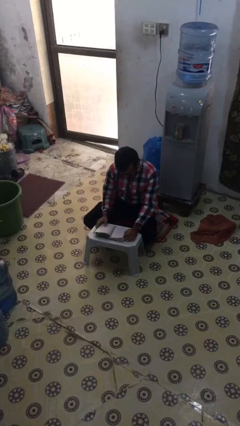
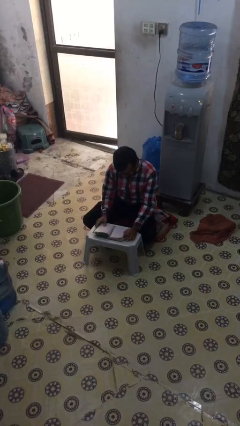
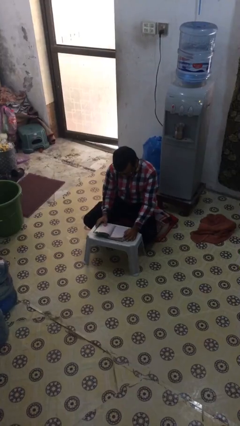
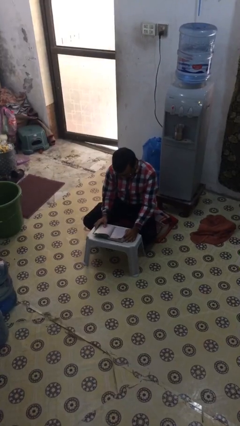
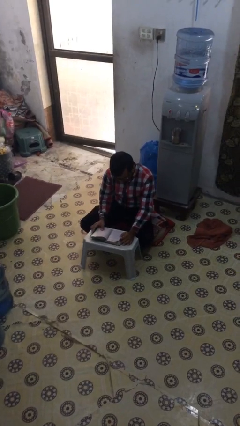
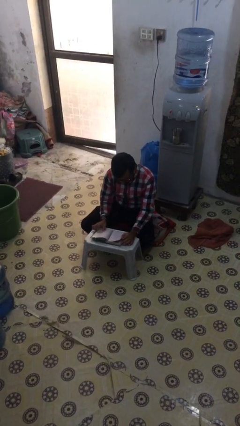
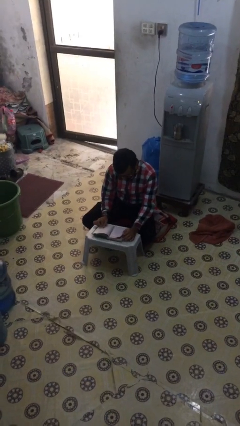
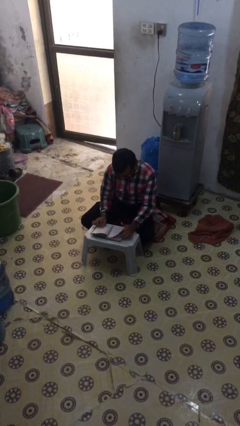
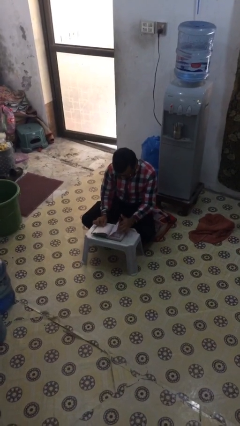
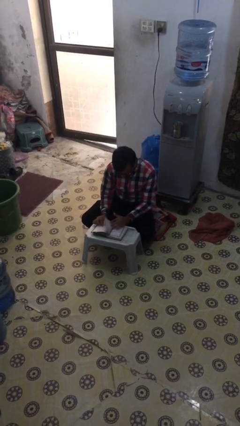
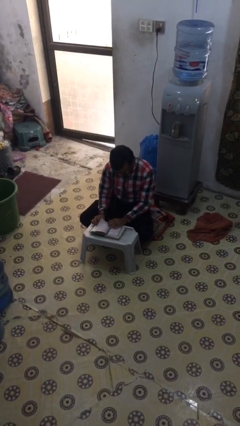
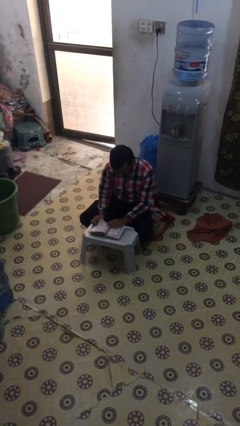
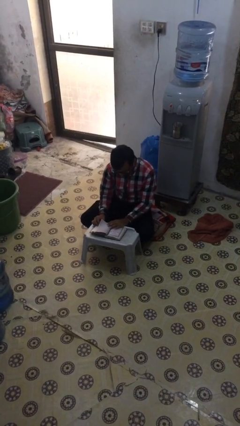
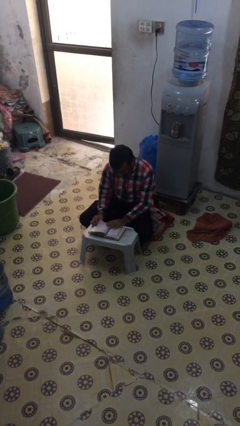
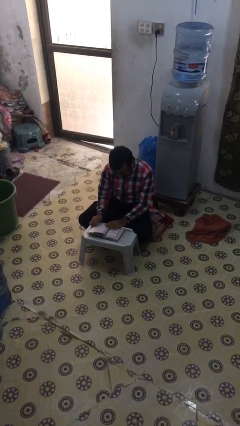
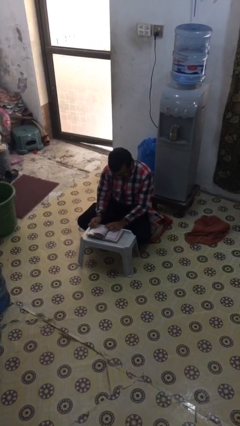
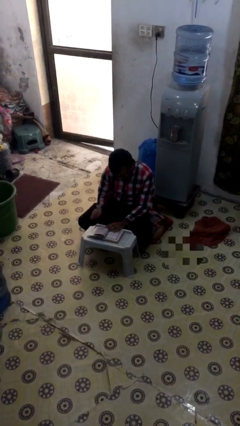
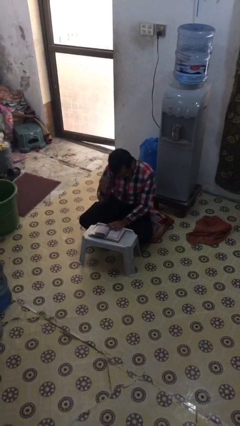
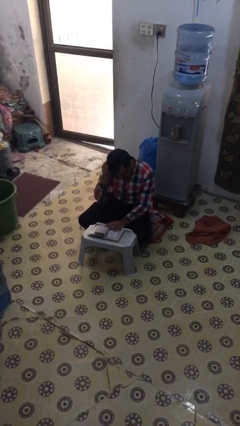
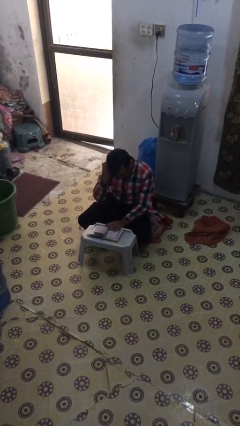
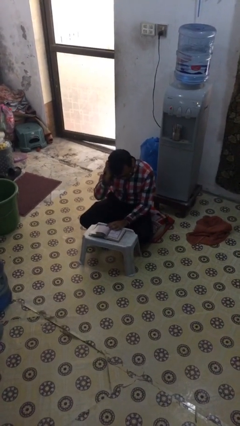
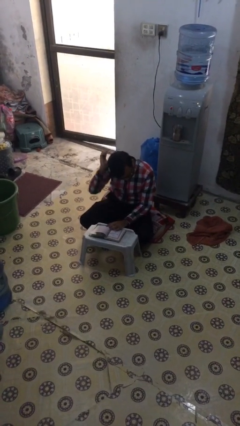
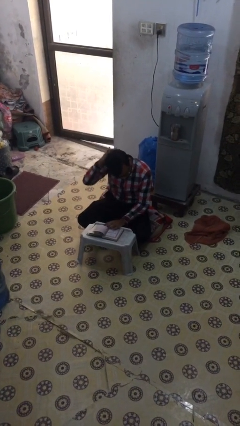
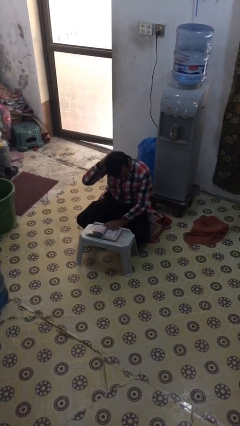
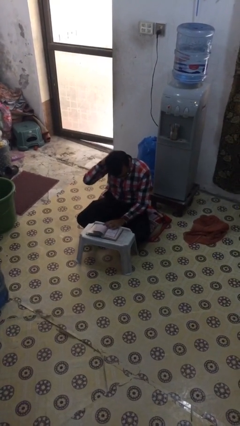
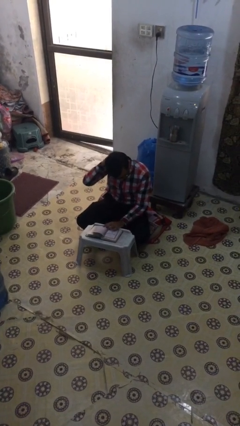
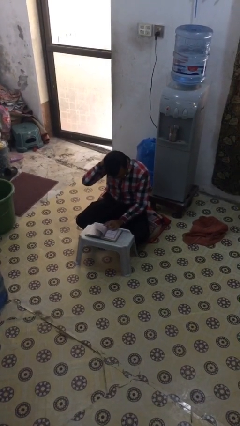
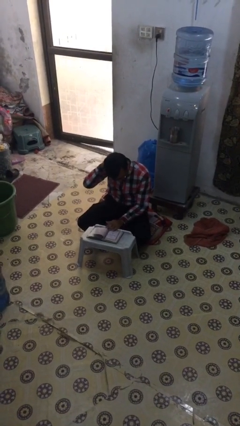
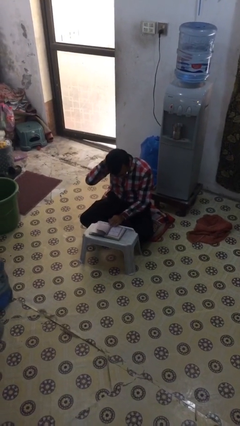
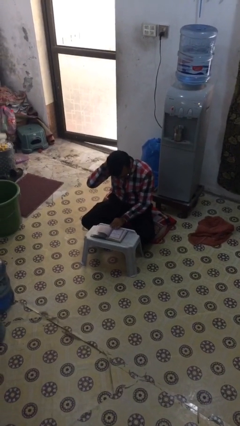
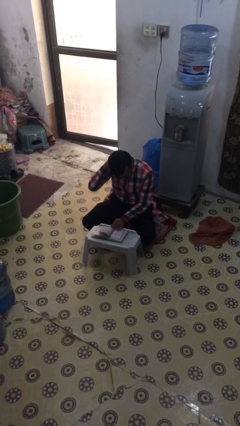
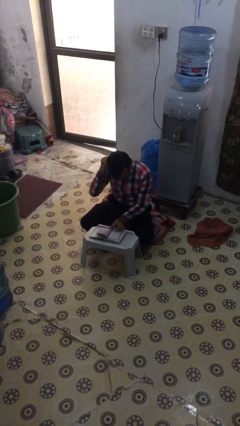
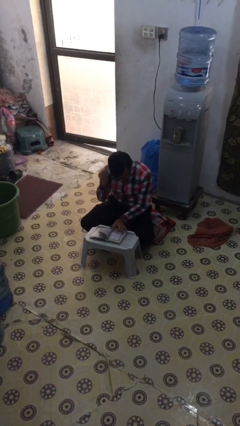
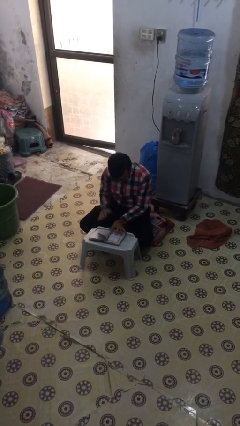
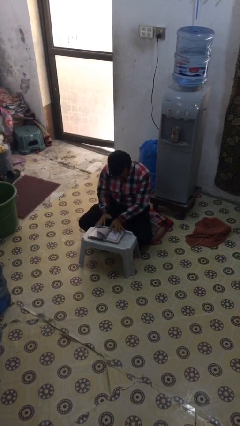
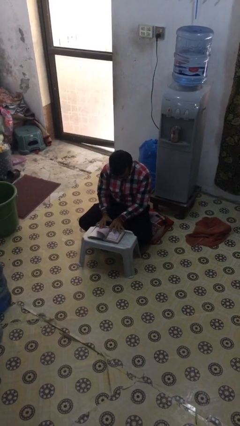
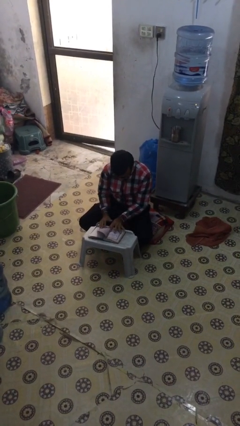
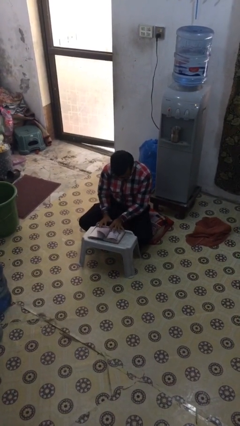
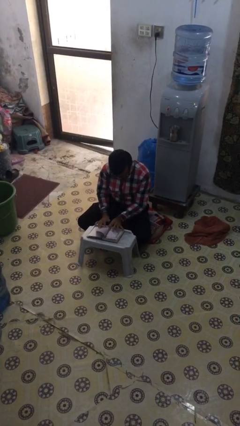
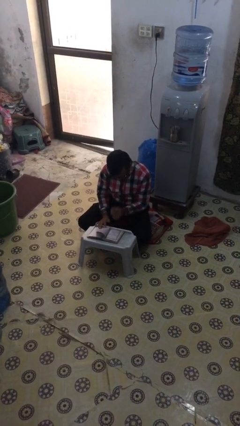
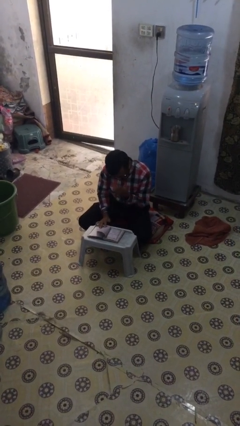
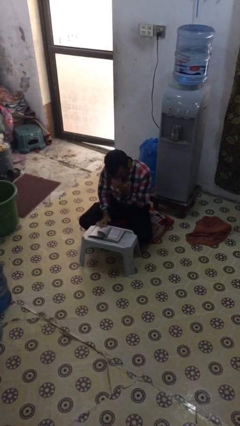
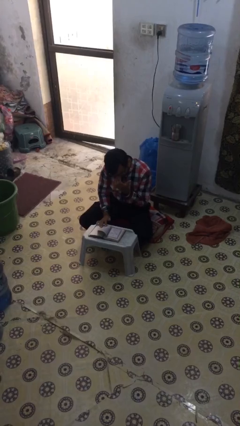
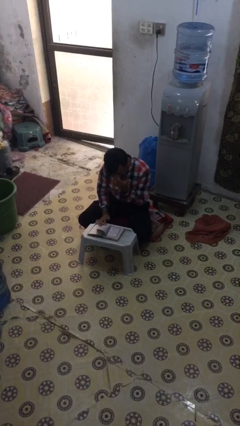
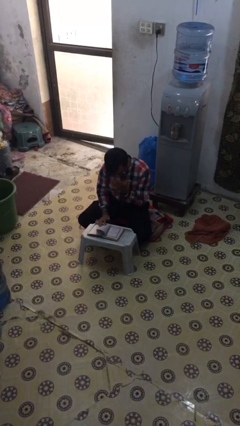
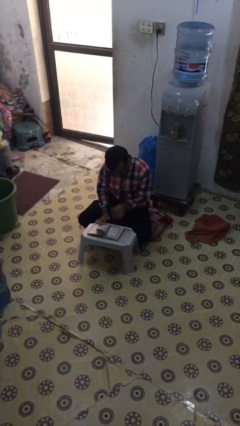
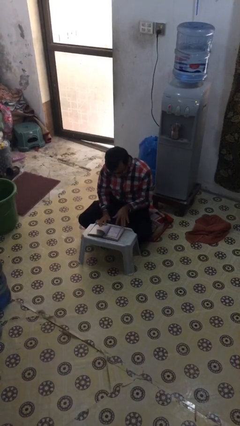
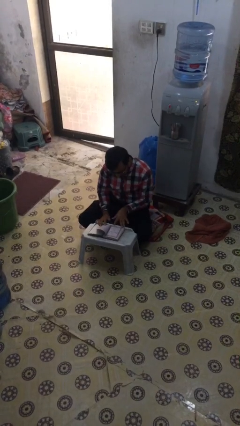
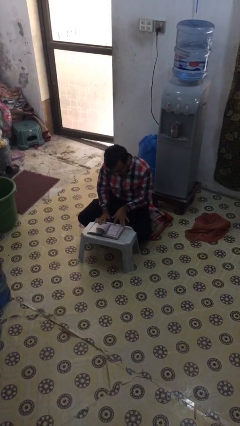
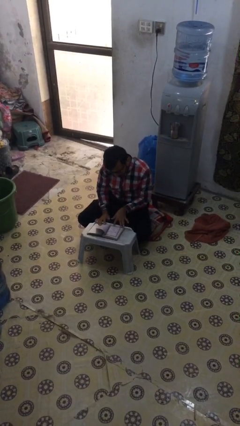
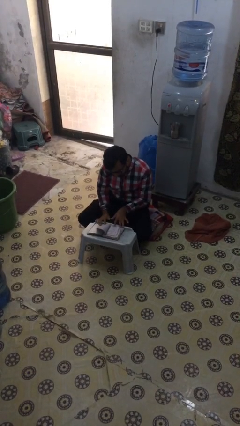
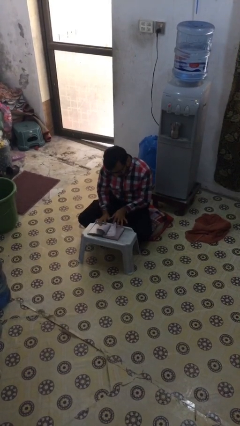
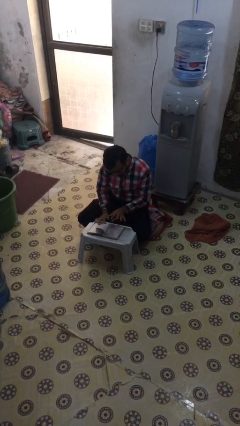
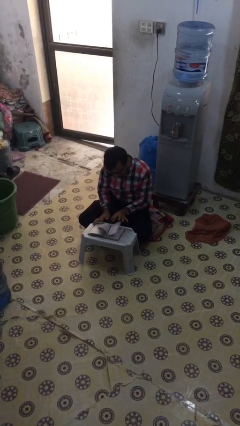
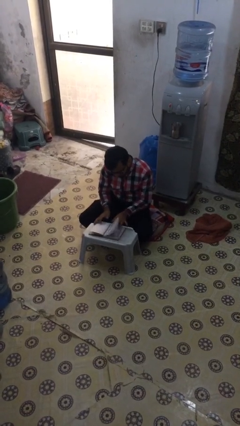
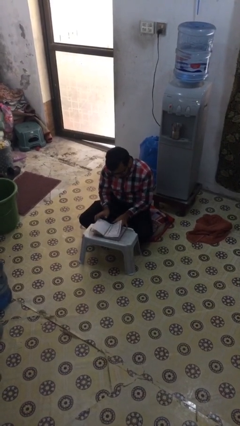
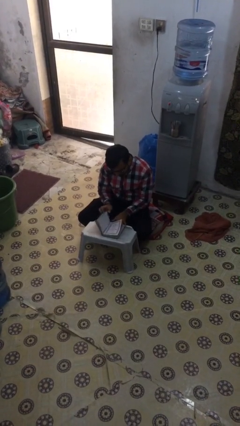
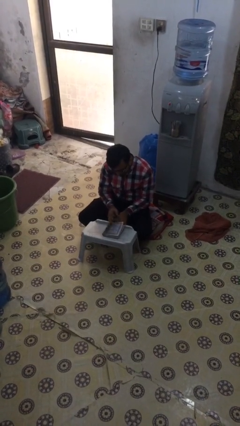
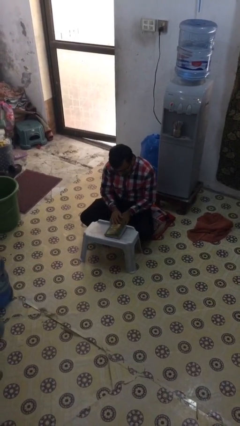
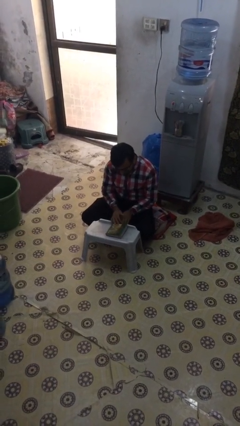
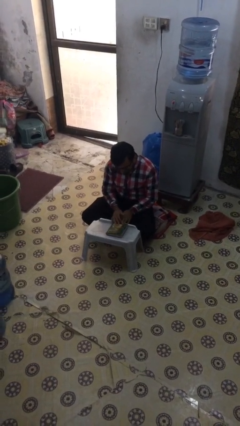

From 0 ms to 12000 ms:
person reads document

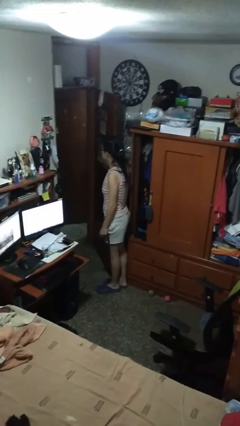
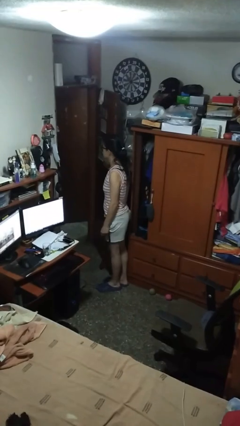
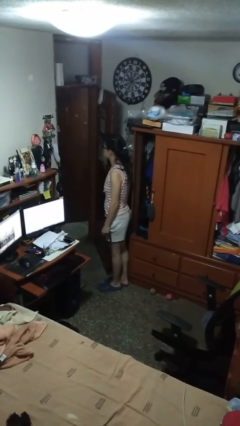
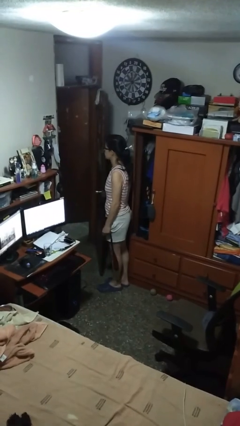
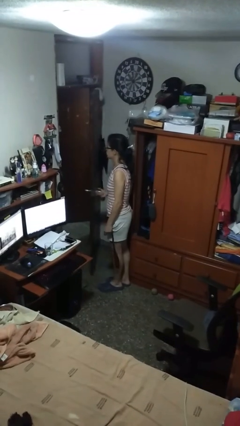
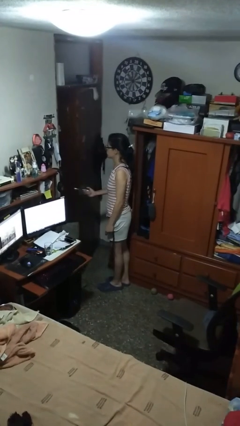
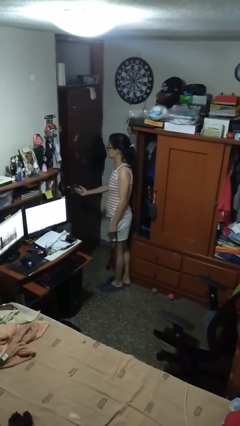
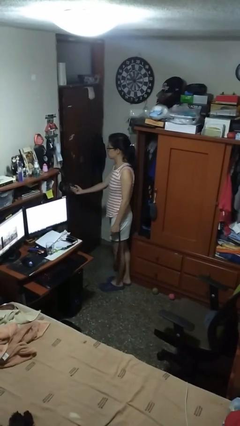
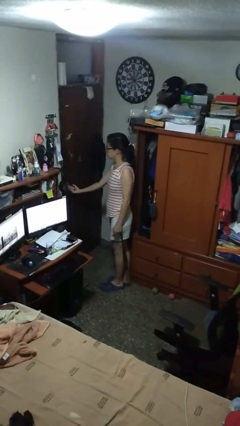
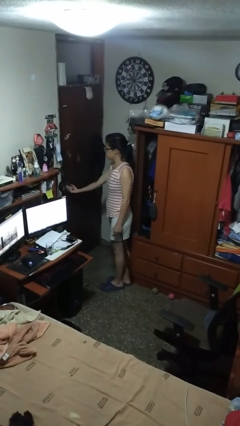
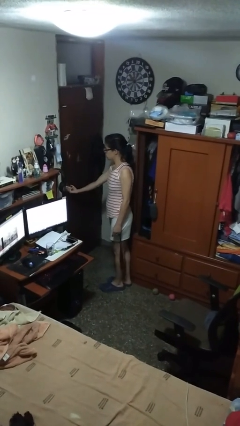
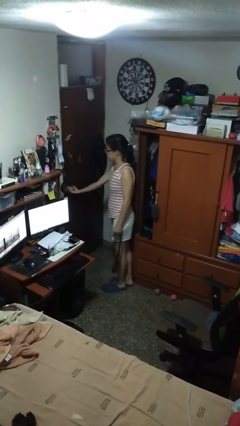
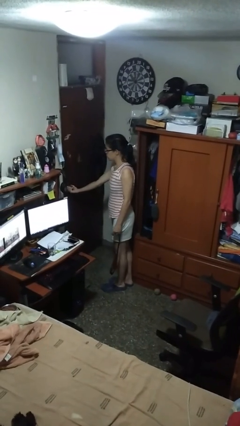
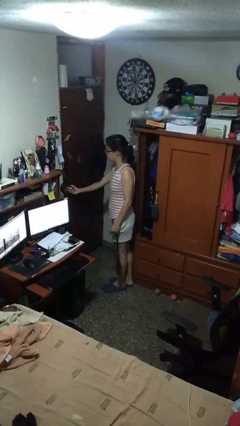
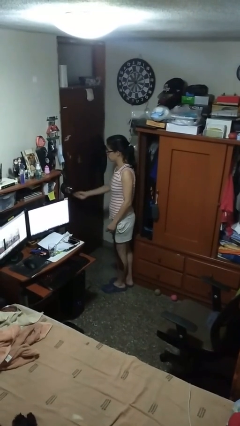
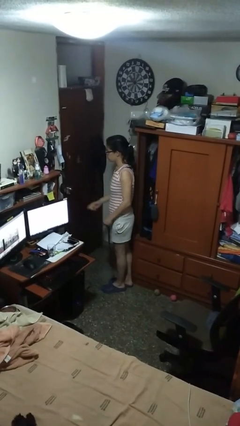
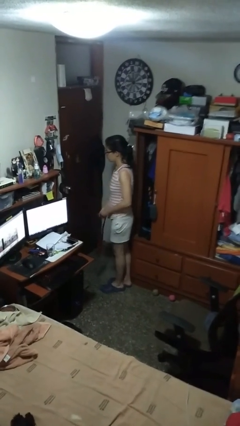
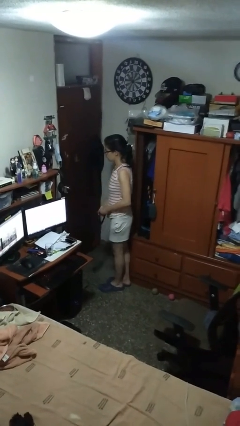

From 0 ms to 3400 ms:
person closes facility door

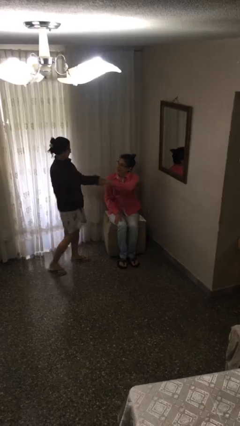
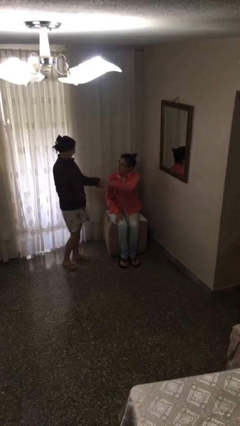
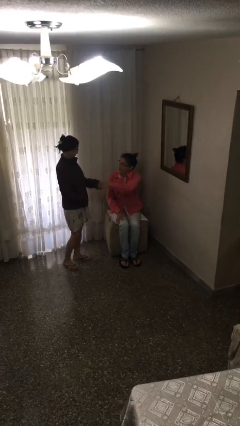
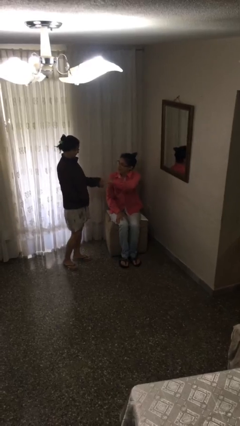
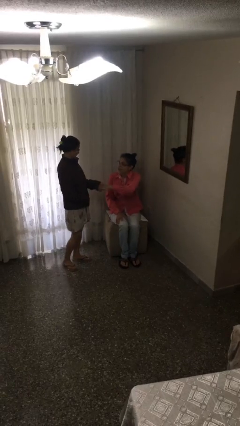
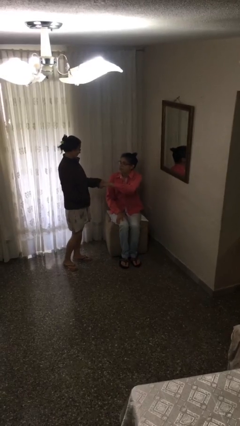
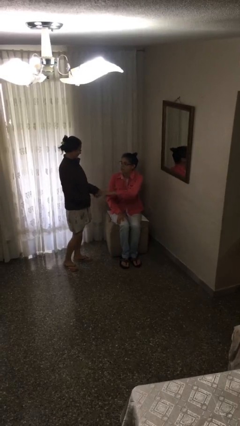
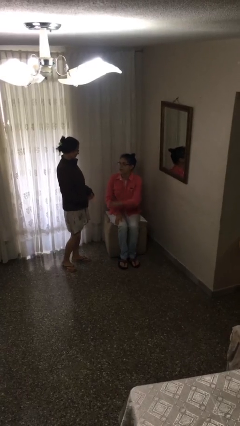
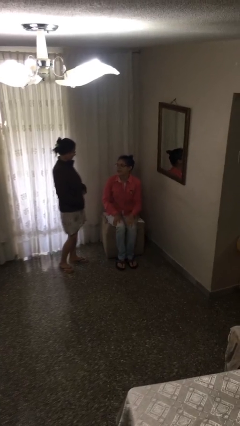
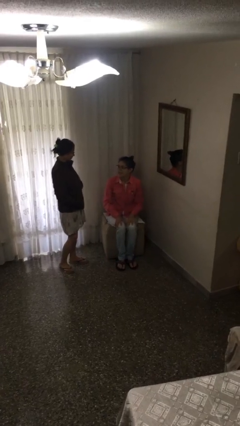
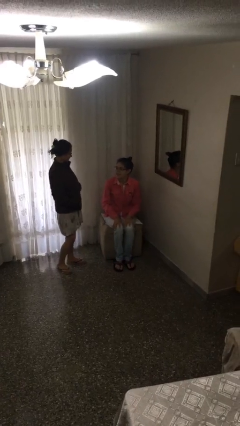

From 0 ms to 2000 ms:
person shakes hand

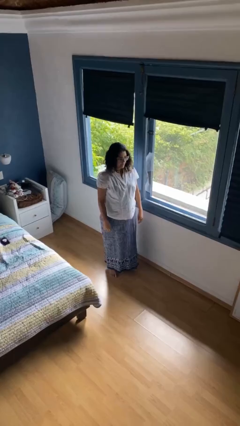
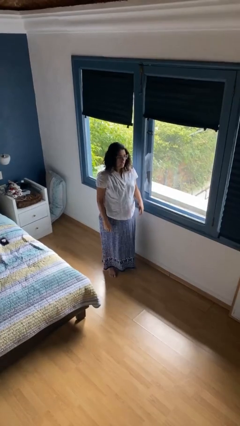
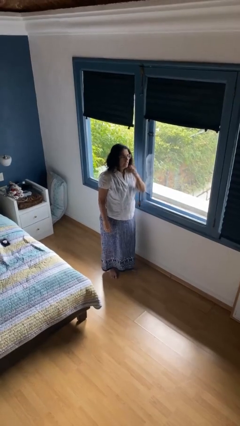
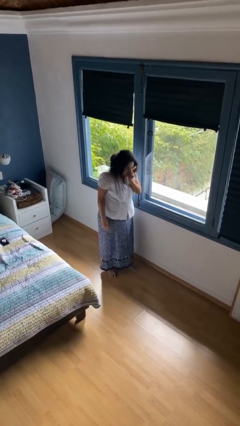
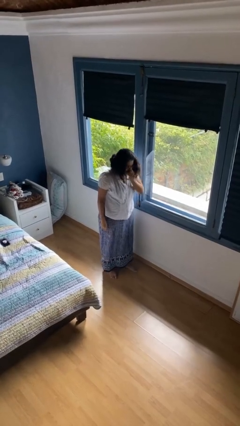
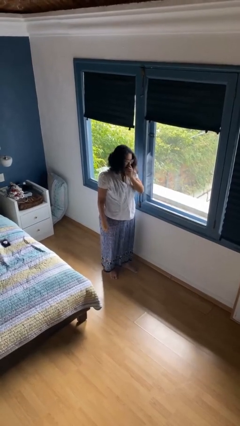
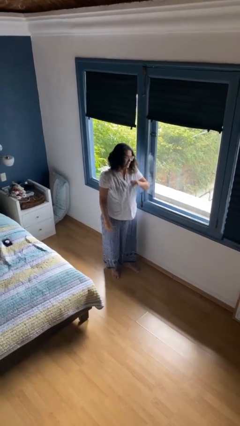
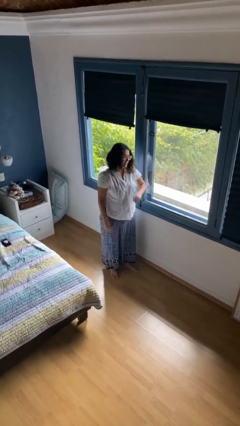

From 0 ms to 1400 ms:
person sneezes into hand
